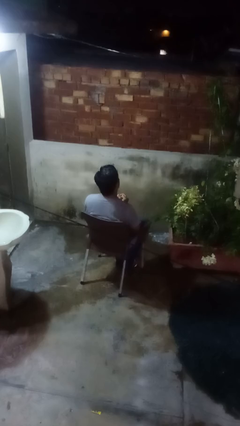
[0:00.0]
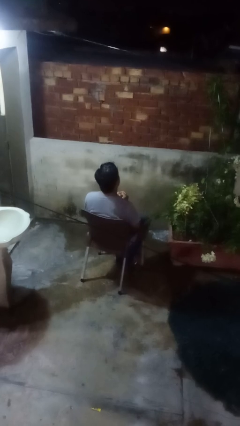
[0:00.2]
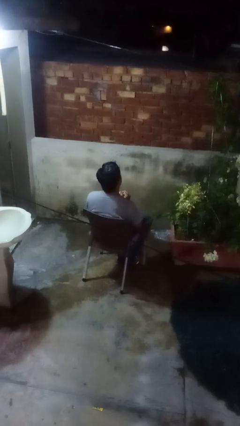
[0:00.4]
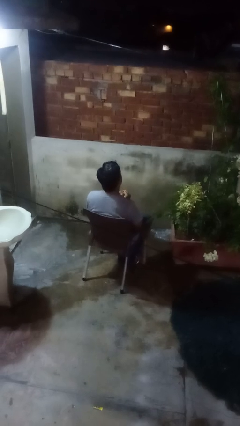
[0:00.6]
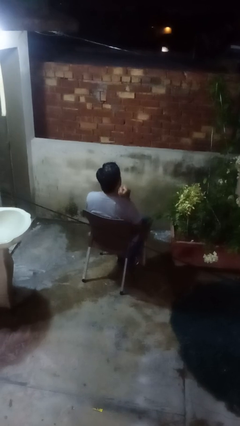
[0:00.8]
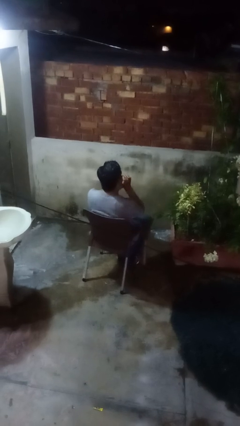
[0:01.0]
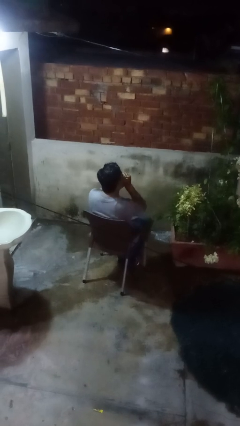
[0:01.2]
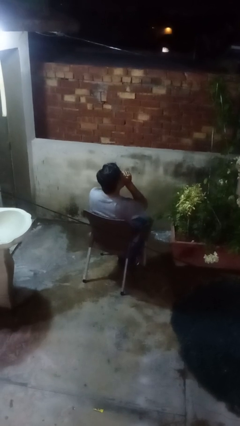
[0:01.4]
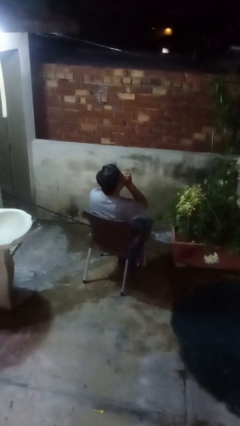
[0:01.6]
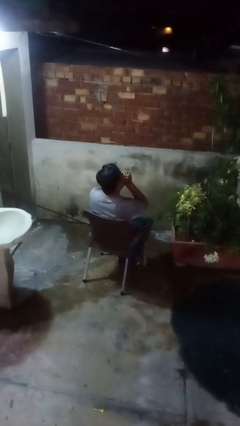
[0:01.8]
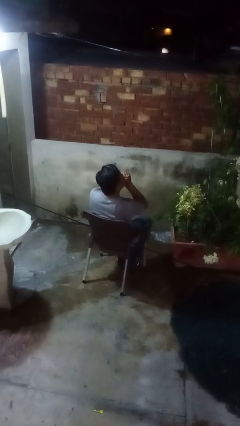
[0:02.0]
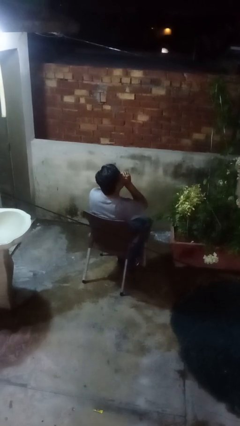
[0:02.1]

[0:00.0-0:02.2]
person blows into hands

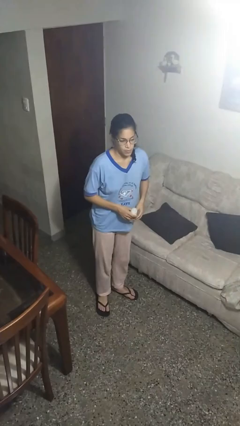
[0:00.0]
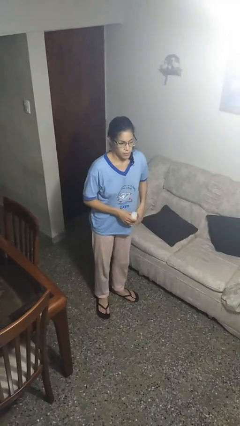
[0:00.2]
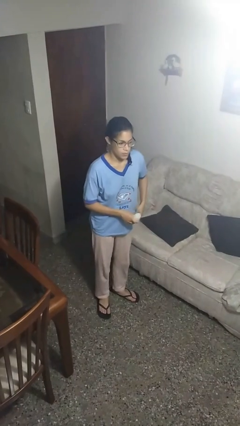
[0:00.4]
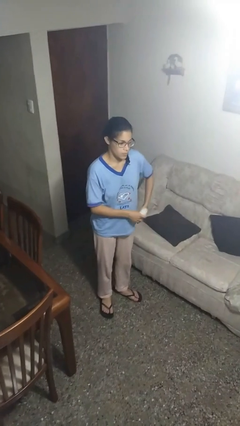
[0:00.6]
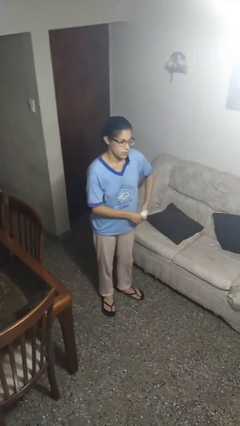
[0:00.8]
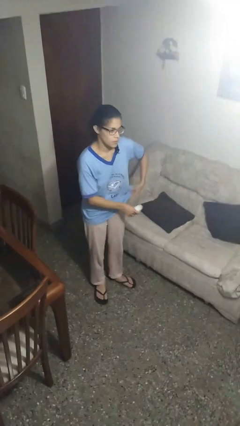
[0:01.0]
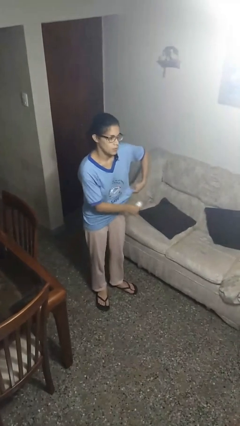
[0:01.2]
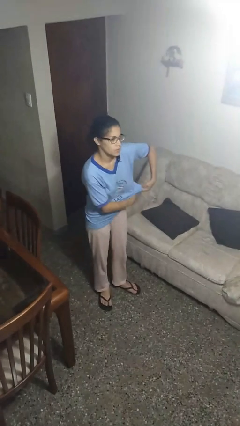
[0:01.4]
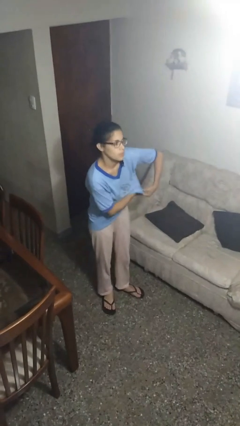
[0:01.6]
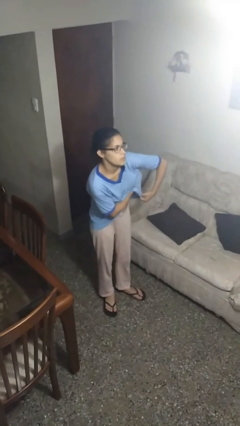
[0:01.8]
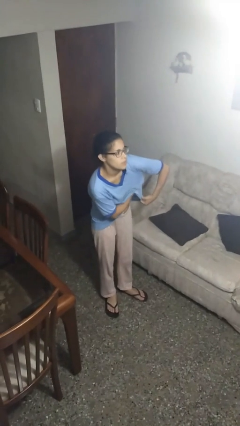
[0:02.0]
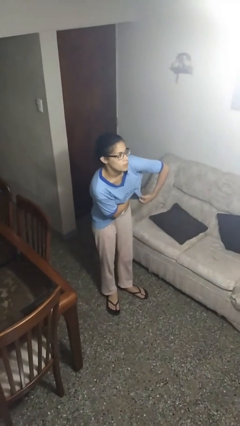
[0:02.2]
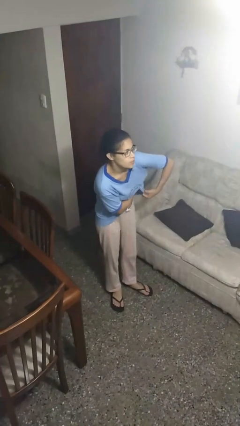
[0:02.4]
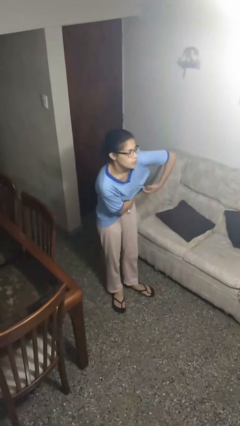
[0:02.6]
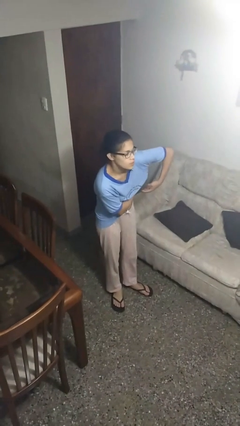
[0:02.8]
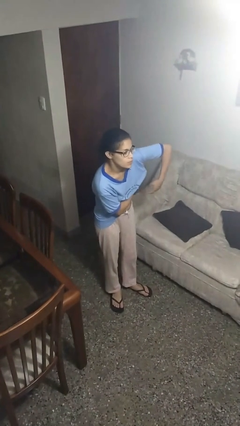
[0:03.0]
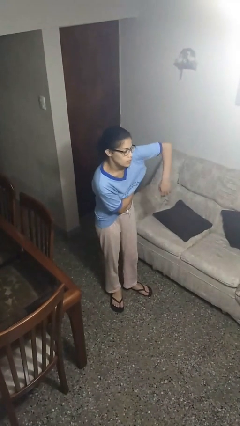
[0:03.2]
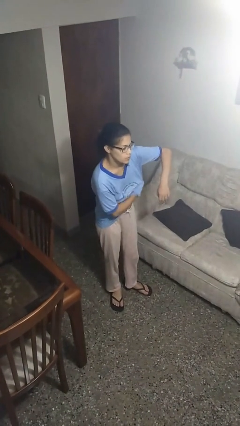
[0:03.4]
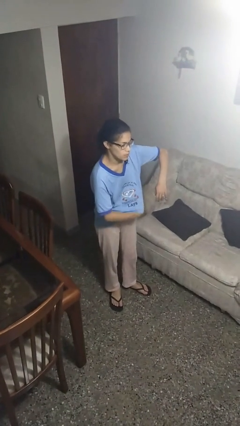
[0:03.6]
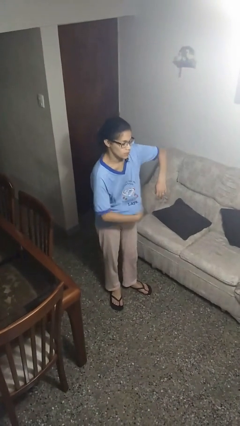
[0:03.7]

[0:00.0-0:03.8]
person applies deodorant

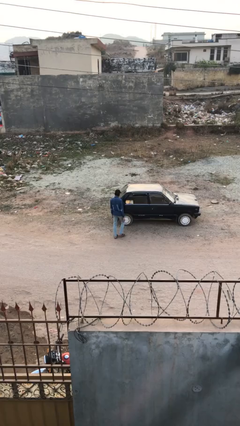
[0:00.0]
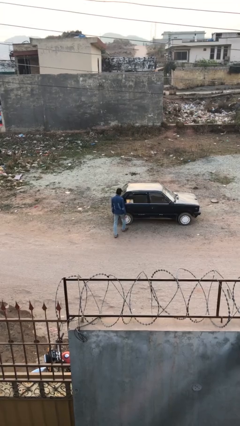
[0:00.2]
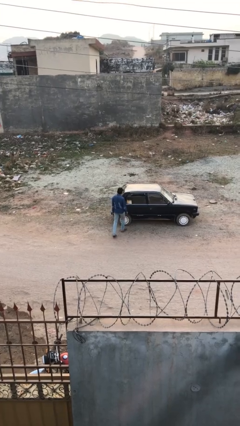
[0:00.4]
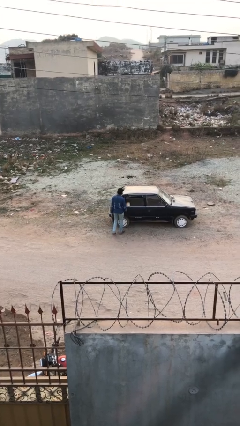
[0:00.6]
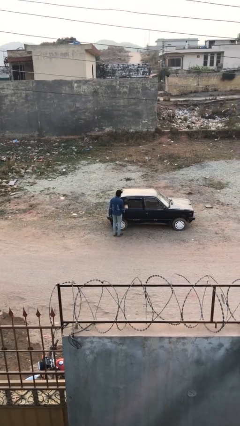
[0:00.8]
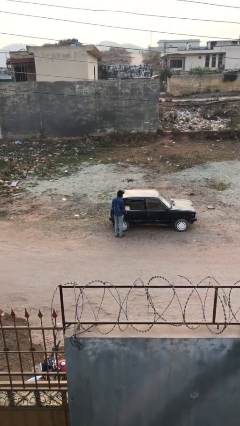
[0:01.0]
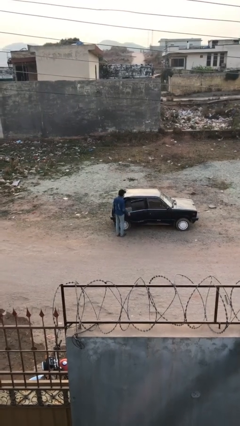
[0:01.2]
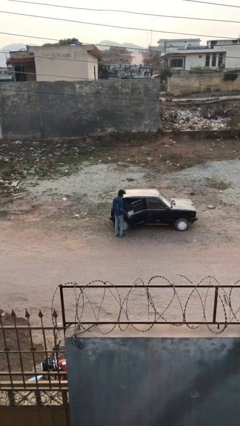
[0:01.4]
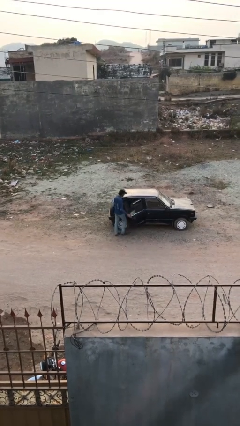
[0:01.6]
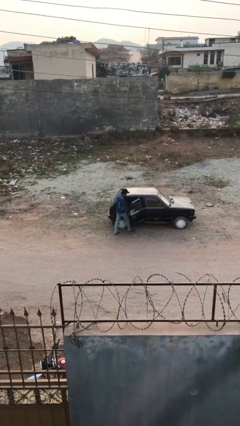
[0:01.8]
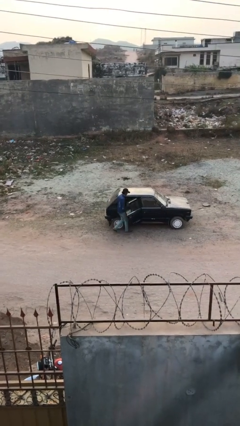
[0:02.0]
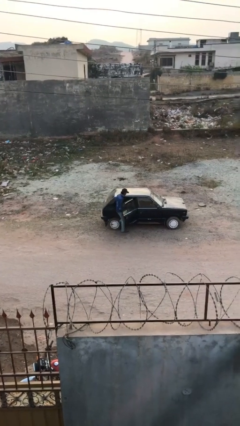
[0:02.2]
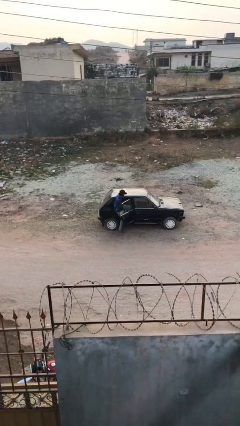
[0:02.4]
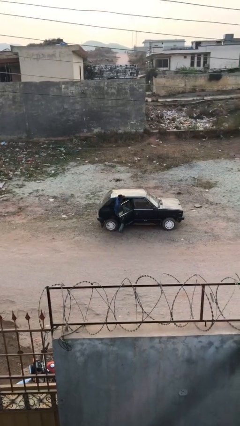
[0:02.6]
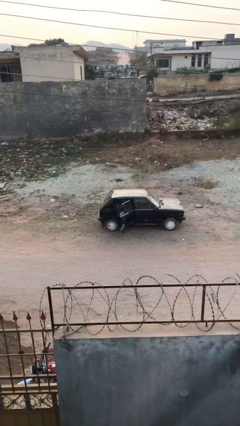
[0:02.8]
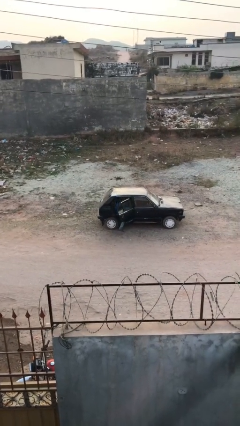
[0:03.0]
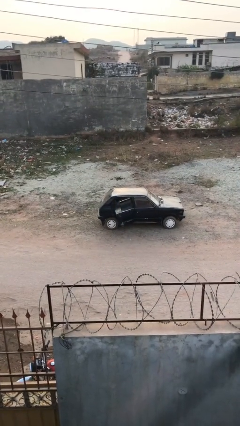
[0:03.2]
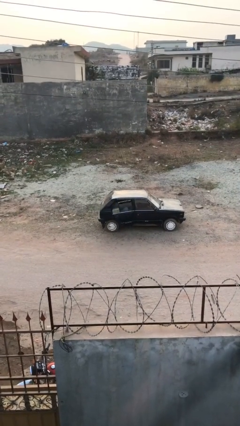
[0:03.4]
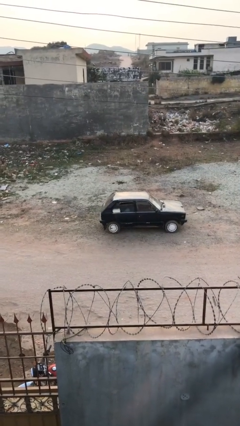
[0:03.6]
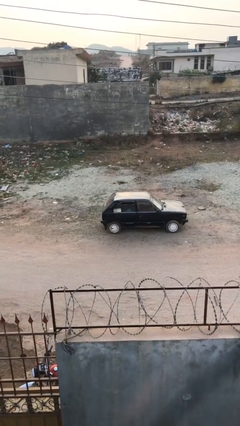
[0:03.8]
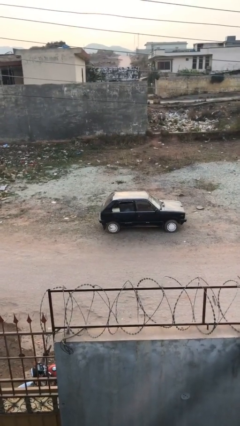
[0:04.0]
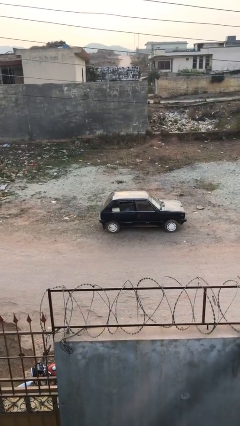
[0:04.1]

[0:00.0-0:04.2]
car picks up person

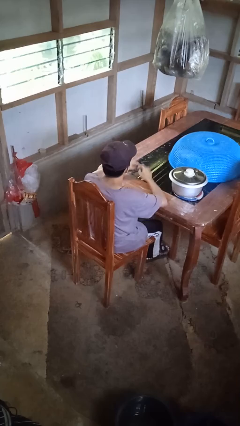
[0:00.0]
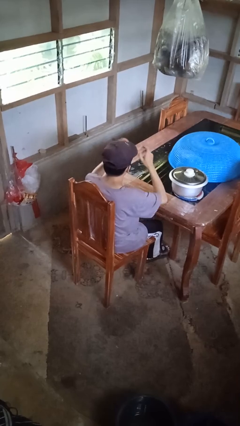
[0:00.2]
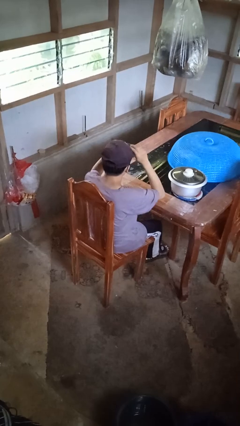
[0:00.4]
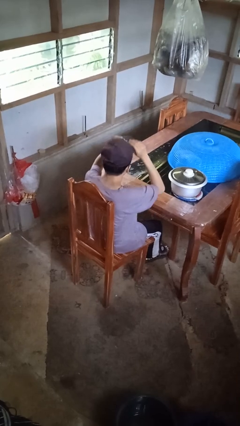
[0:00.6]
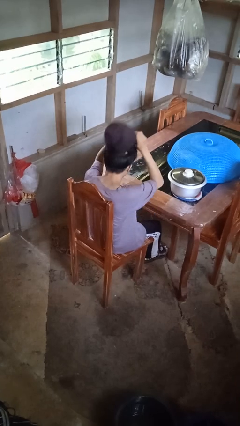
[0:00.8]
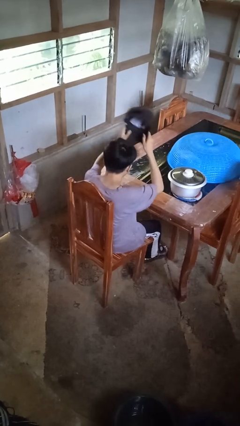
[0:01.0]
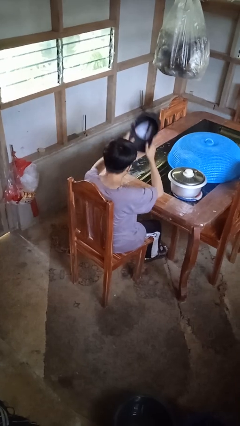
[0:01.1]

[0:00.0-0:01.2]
person takes off hat

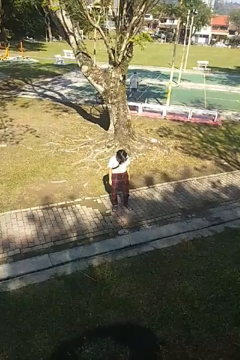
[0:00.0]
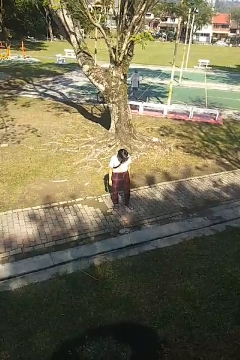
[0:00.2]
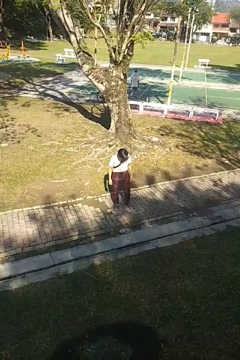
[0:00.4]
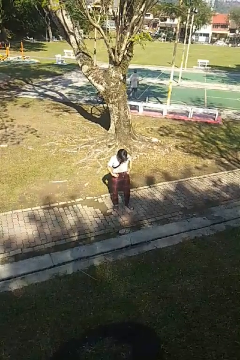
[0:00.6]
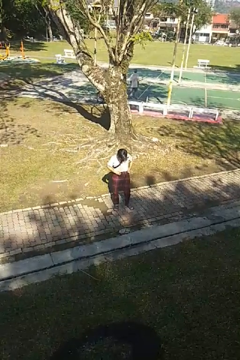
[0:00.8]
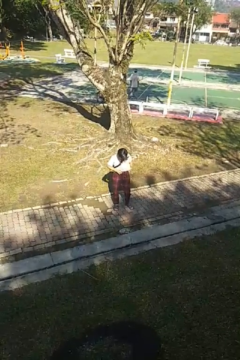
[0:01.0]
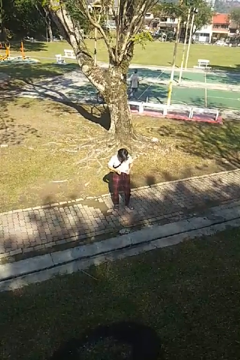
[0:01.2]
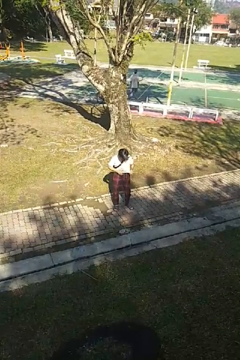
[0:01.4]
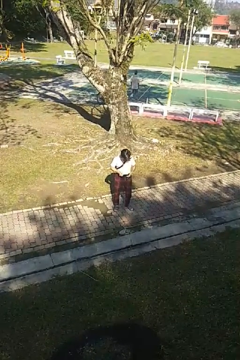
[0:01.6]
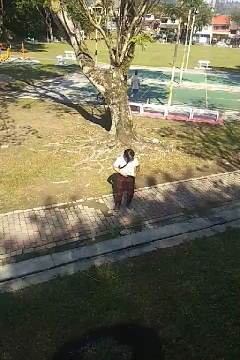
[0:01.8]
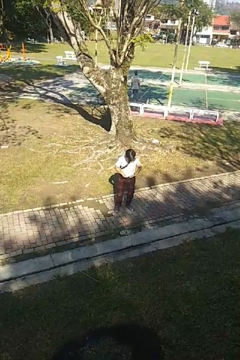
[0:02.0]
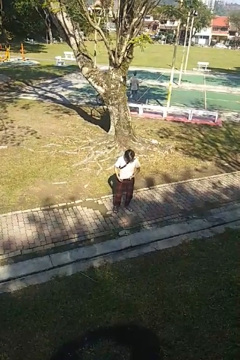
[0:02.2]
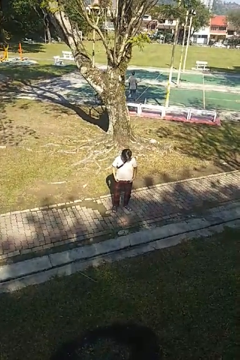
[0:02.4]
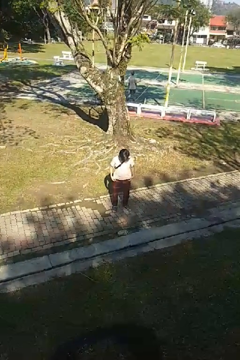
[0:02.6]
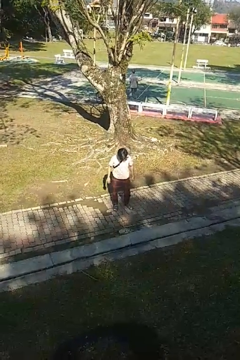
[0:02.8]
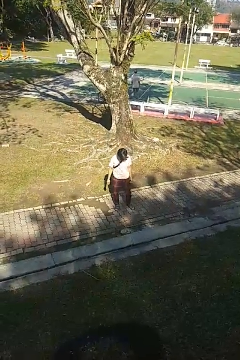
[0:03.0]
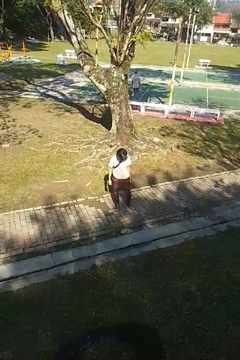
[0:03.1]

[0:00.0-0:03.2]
person untucks shirt

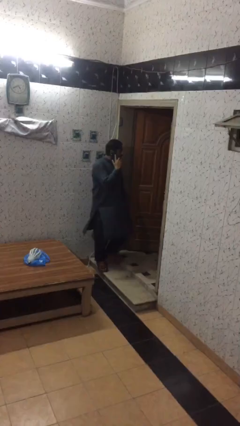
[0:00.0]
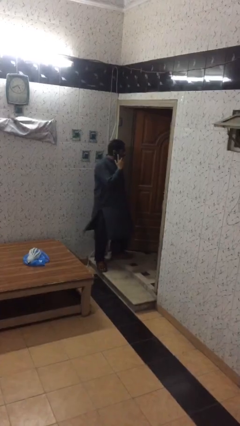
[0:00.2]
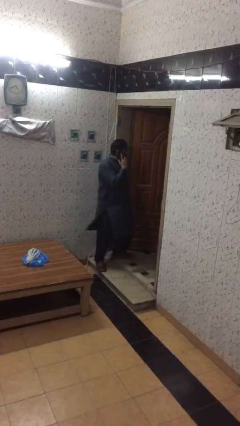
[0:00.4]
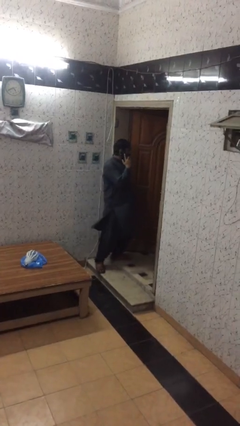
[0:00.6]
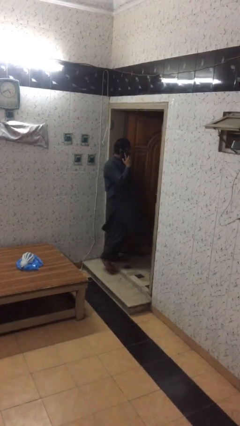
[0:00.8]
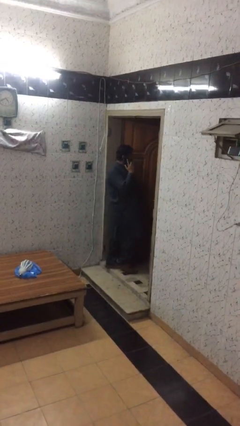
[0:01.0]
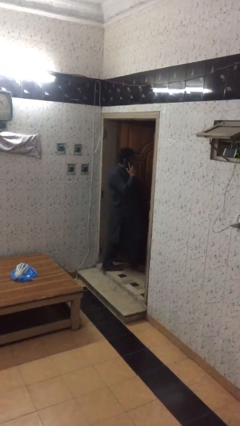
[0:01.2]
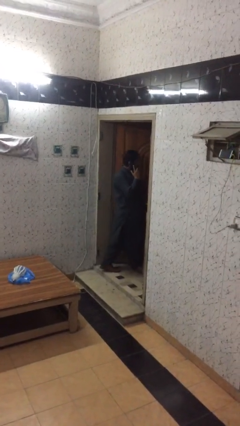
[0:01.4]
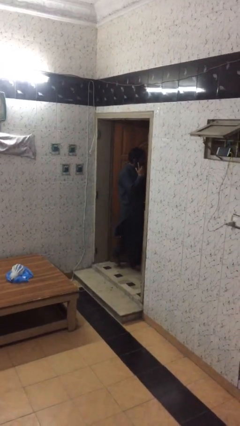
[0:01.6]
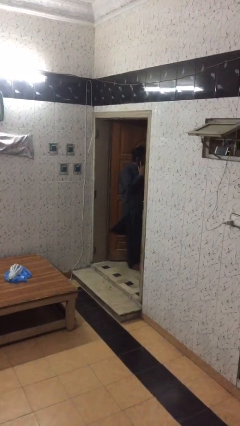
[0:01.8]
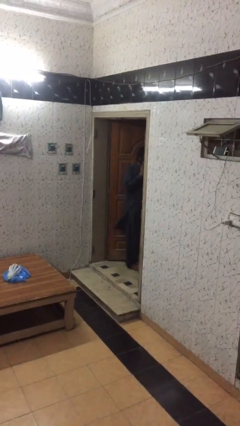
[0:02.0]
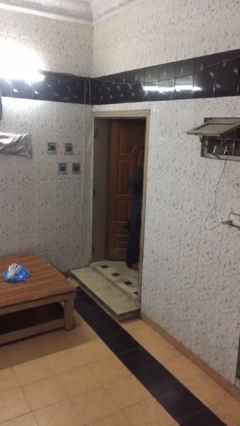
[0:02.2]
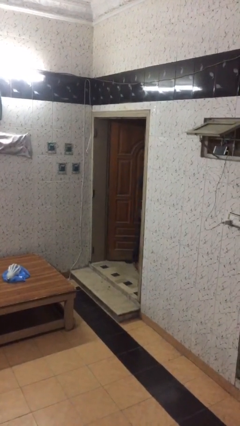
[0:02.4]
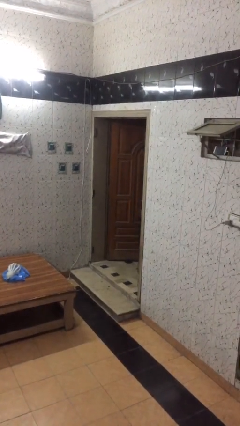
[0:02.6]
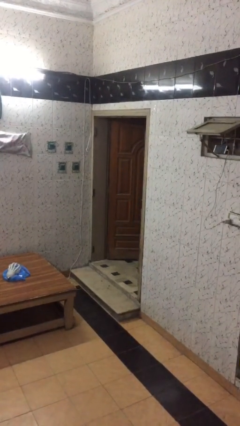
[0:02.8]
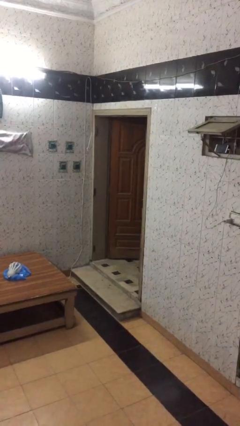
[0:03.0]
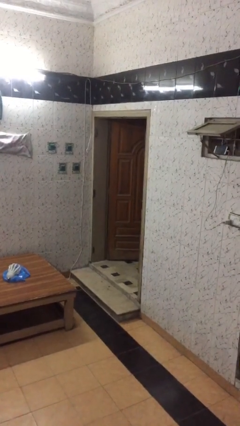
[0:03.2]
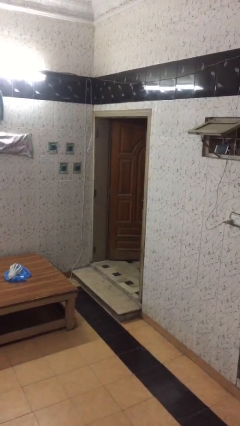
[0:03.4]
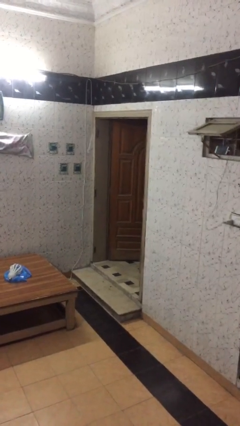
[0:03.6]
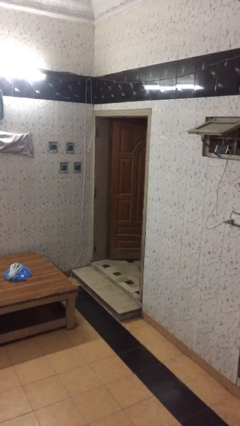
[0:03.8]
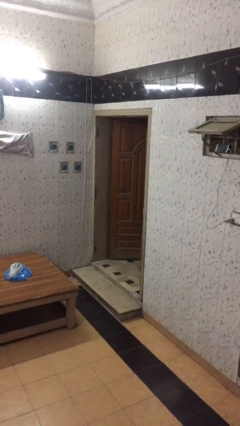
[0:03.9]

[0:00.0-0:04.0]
person exits scene through structure
